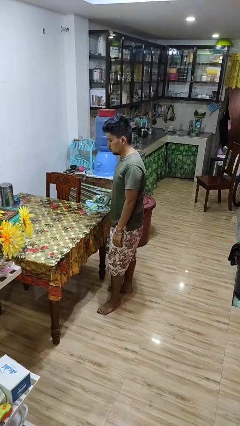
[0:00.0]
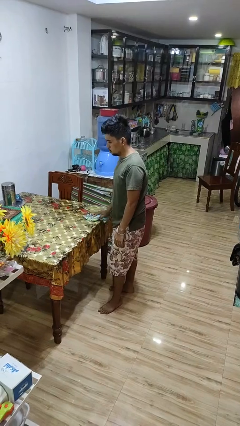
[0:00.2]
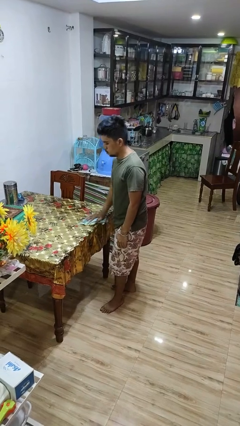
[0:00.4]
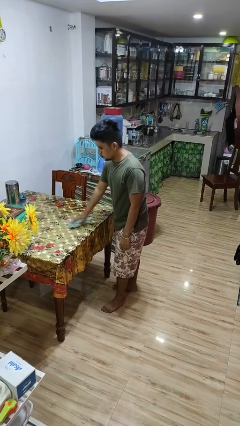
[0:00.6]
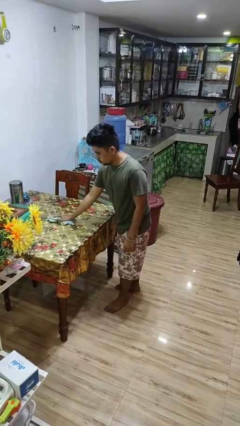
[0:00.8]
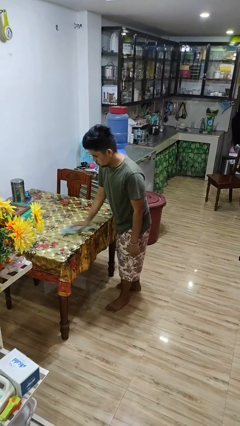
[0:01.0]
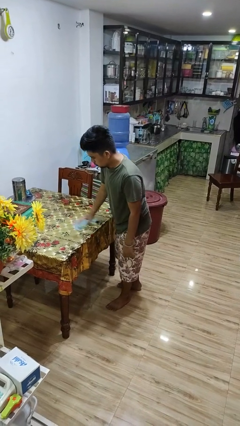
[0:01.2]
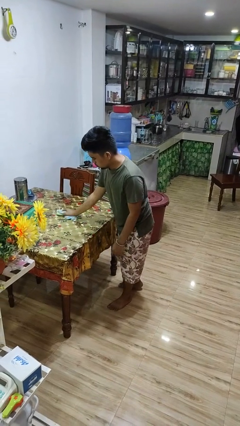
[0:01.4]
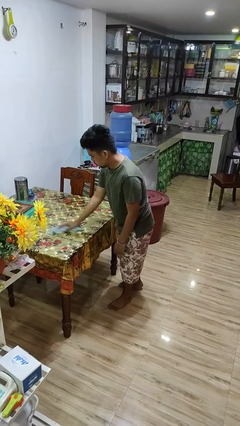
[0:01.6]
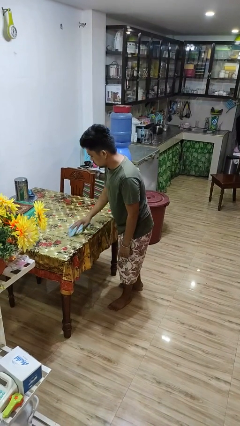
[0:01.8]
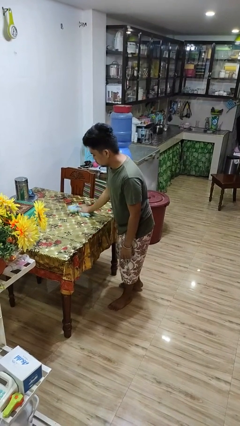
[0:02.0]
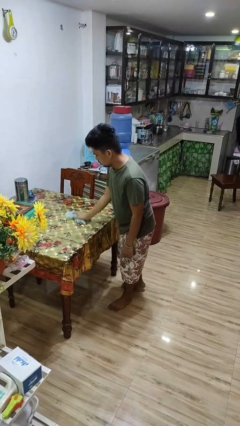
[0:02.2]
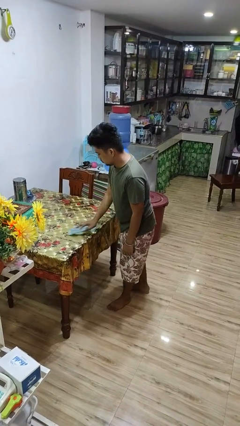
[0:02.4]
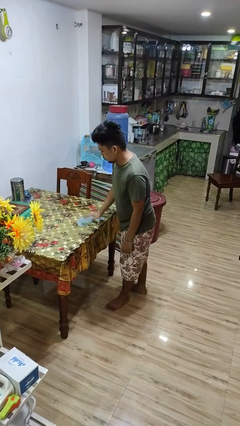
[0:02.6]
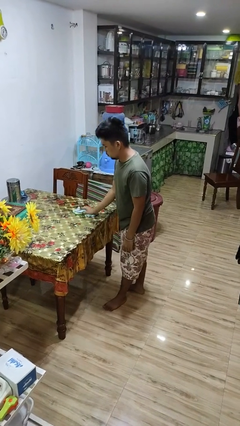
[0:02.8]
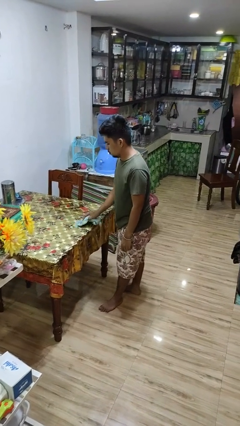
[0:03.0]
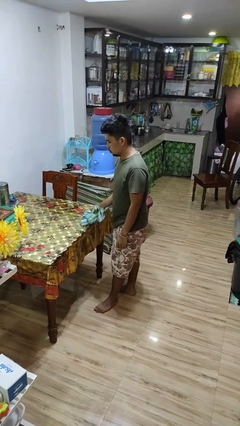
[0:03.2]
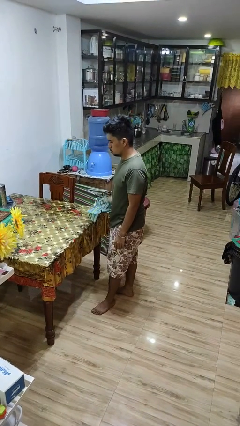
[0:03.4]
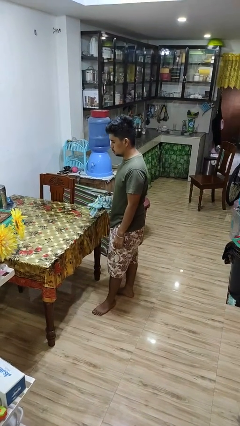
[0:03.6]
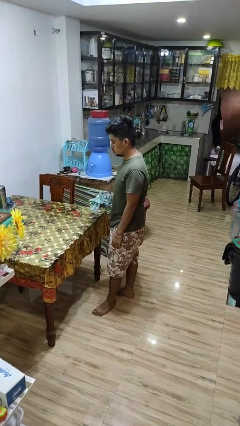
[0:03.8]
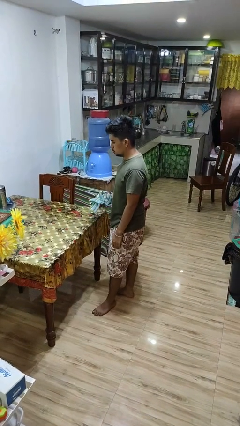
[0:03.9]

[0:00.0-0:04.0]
person cleans table with rag

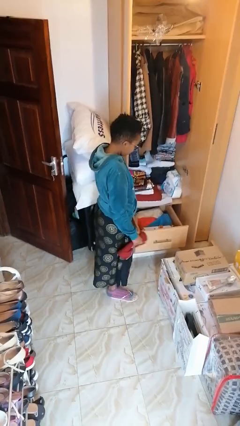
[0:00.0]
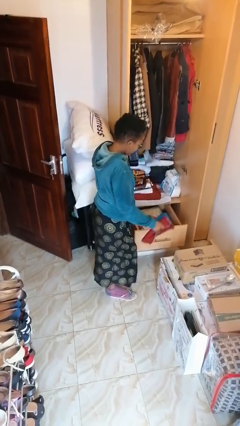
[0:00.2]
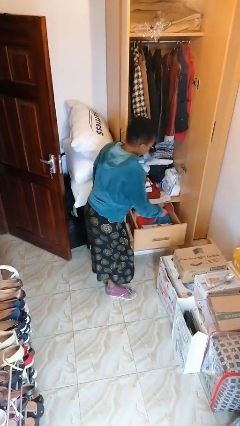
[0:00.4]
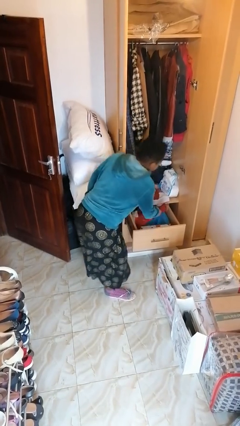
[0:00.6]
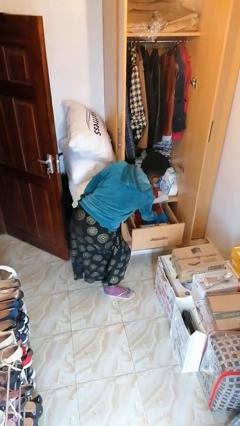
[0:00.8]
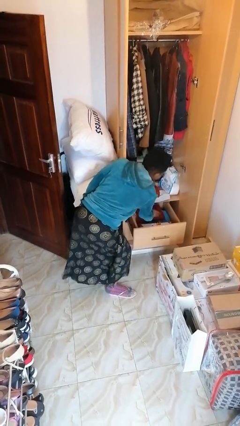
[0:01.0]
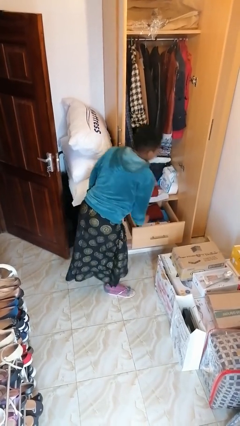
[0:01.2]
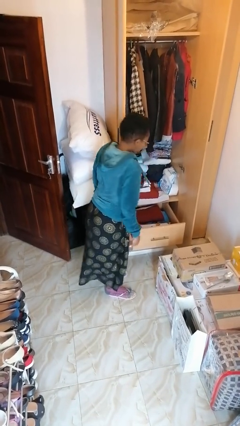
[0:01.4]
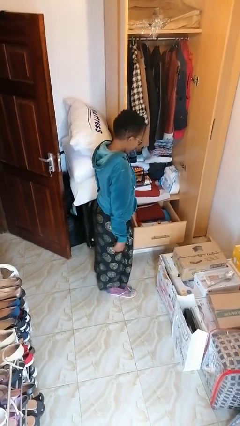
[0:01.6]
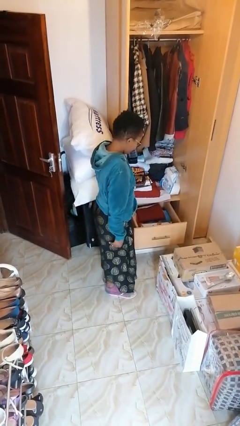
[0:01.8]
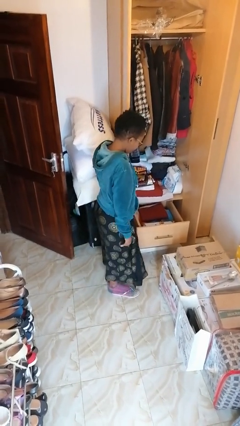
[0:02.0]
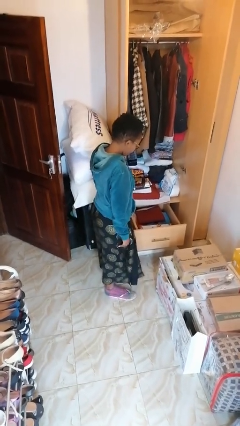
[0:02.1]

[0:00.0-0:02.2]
person puts clothes into dresser

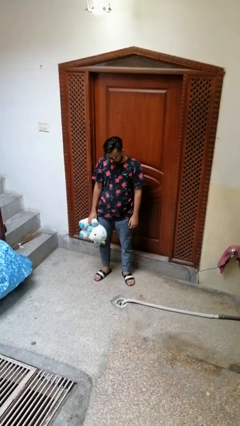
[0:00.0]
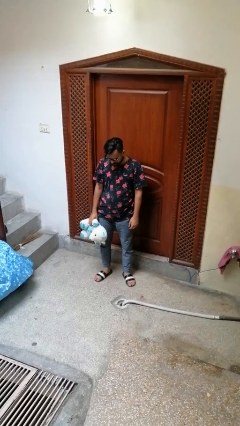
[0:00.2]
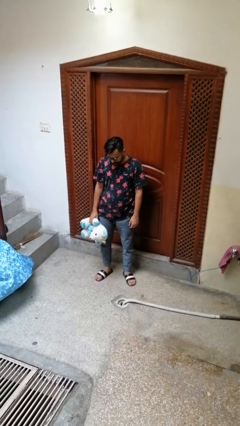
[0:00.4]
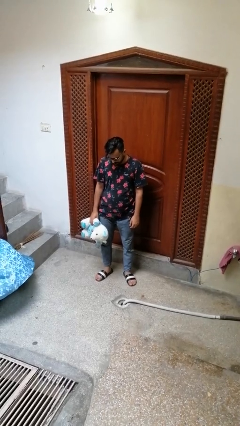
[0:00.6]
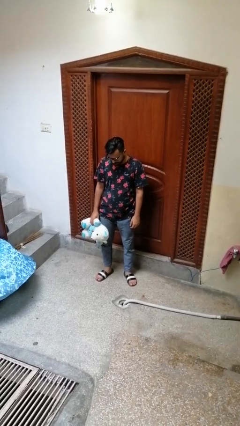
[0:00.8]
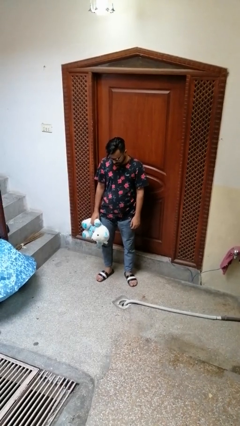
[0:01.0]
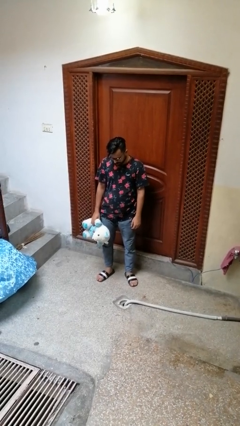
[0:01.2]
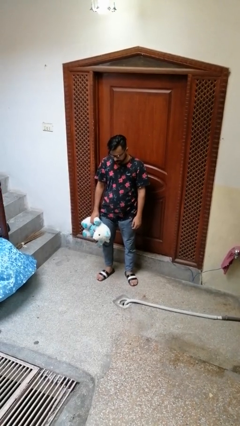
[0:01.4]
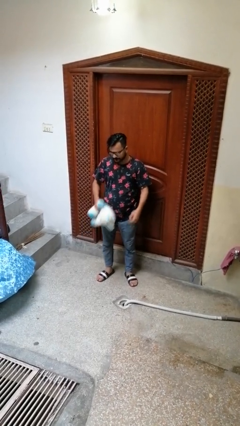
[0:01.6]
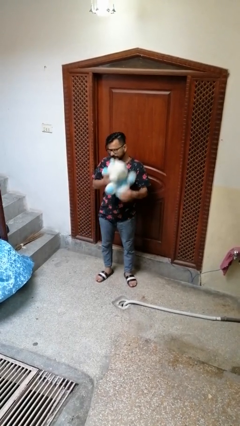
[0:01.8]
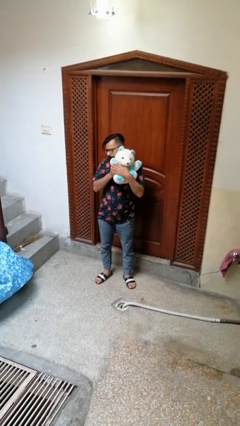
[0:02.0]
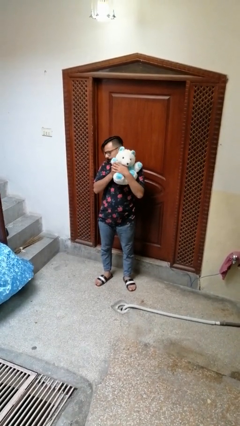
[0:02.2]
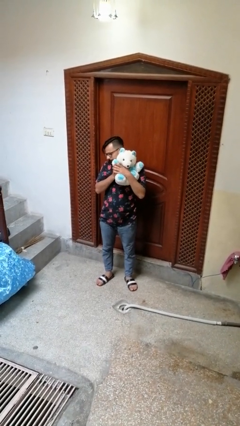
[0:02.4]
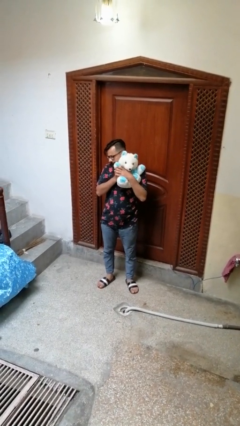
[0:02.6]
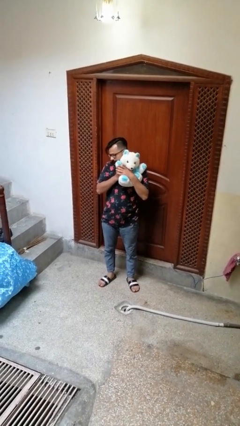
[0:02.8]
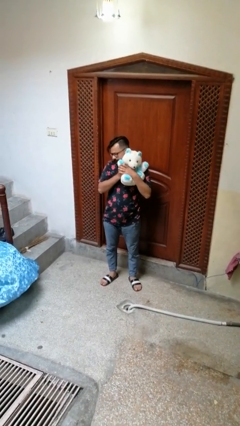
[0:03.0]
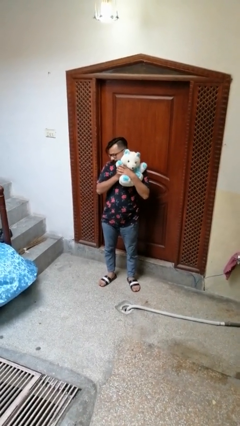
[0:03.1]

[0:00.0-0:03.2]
person hugs stuffed animal

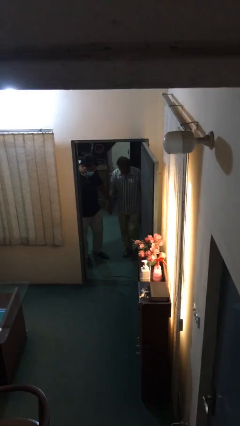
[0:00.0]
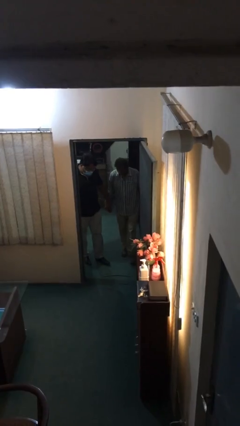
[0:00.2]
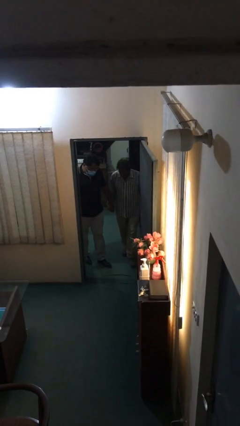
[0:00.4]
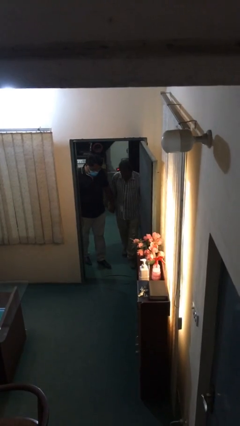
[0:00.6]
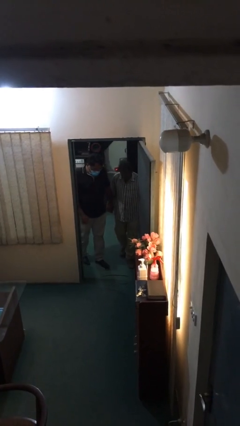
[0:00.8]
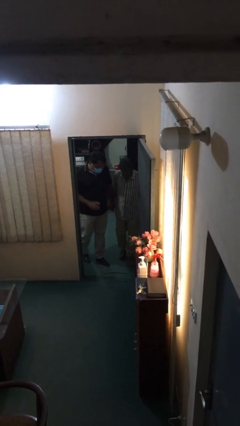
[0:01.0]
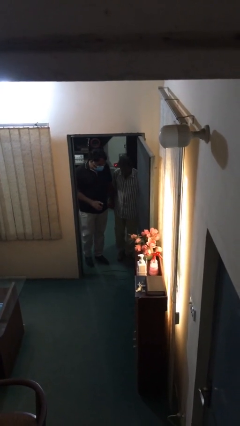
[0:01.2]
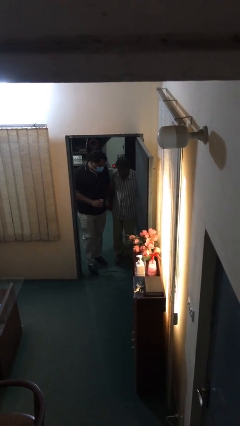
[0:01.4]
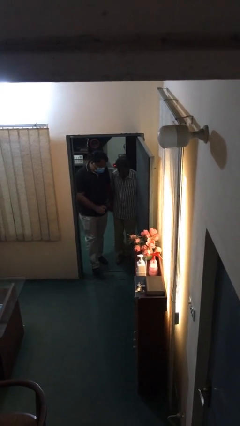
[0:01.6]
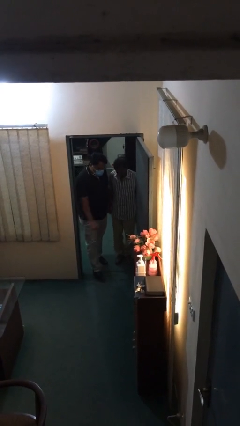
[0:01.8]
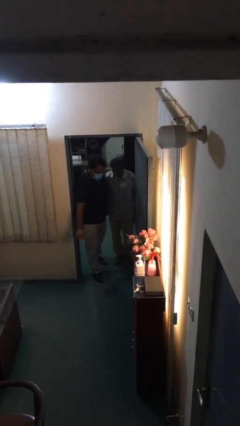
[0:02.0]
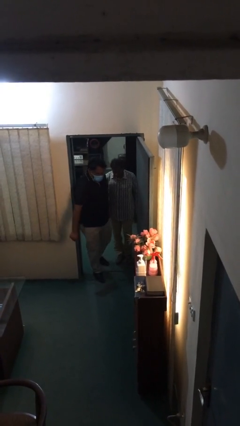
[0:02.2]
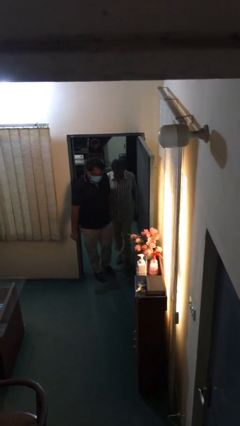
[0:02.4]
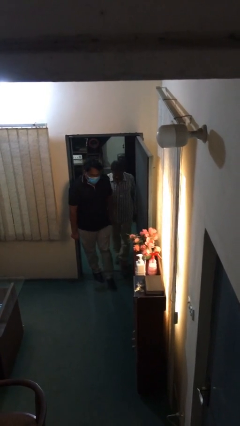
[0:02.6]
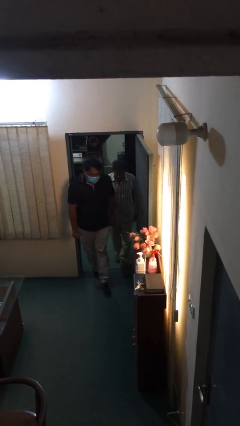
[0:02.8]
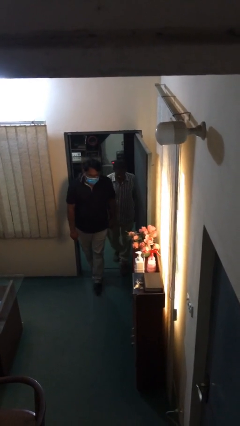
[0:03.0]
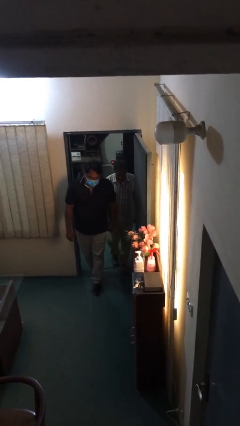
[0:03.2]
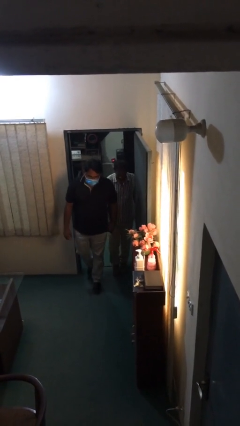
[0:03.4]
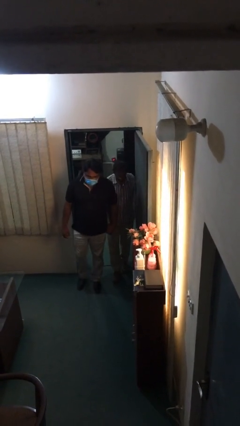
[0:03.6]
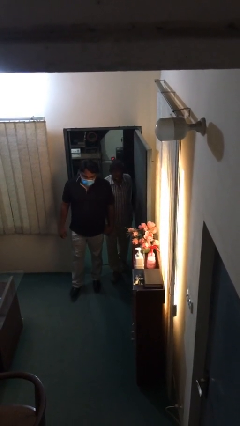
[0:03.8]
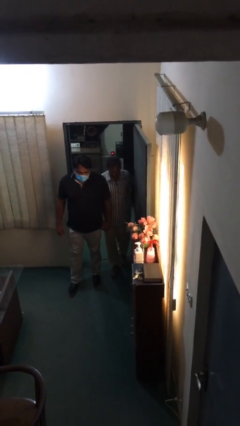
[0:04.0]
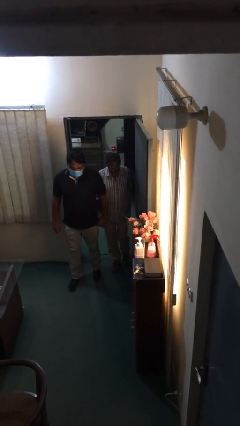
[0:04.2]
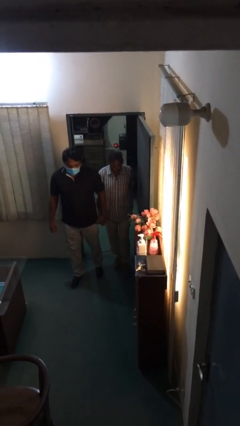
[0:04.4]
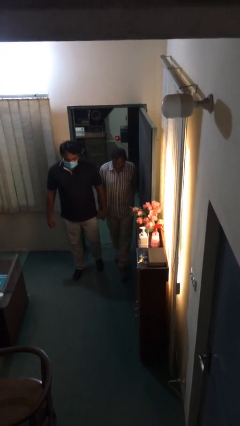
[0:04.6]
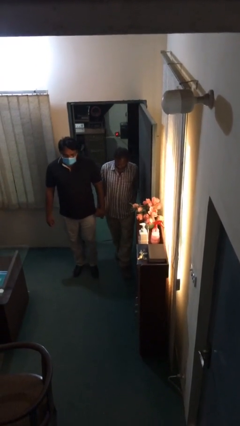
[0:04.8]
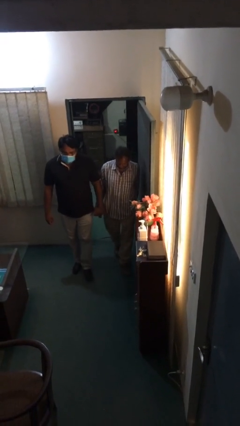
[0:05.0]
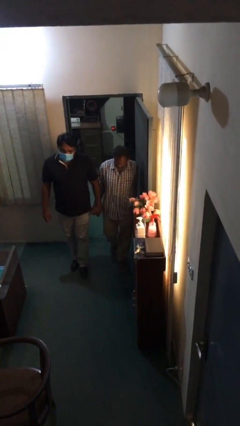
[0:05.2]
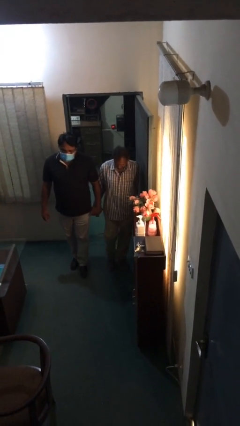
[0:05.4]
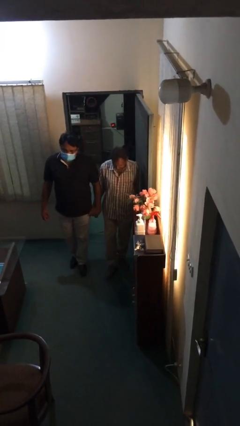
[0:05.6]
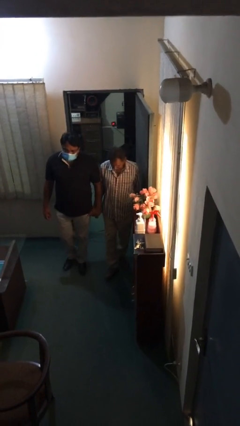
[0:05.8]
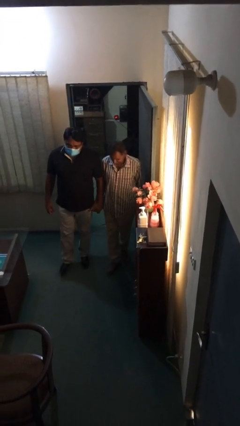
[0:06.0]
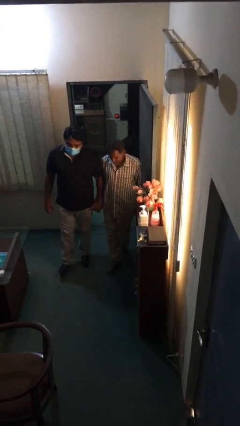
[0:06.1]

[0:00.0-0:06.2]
person holds hand

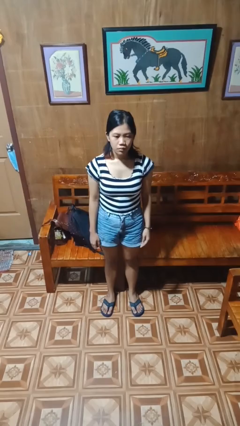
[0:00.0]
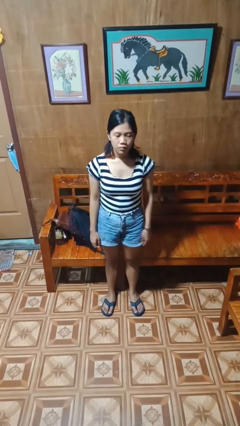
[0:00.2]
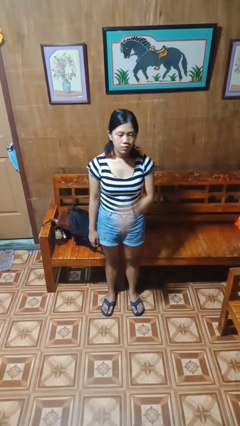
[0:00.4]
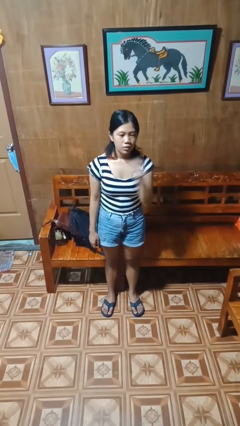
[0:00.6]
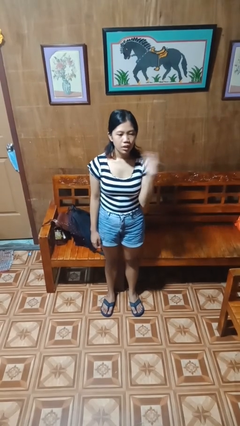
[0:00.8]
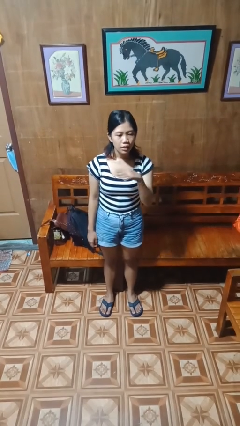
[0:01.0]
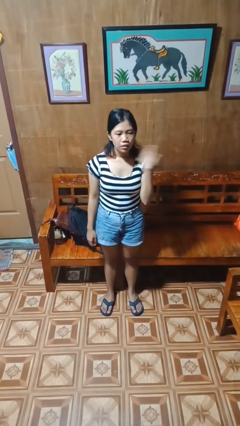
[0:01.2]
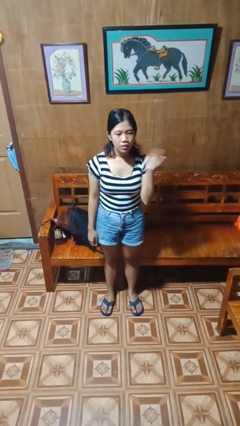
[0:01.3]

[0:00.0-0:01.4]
person gestures cut

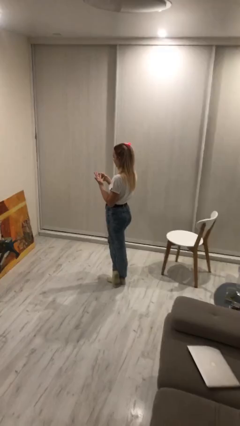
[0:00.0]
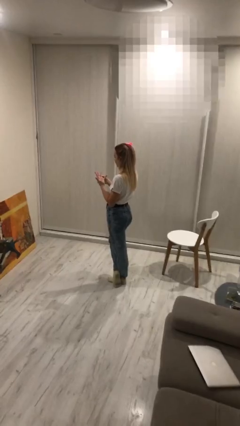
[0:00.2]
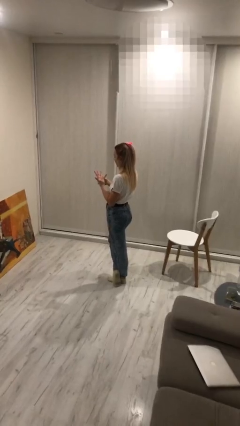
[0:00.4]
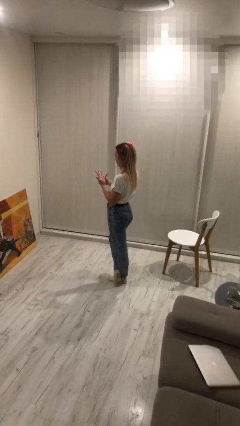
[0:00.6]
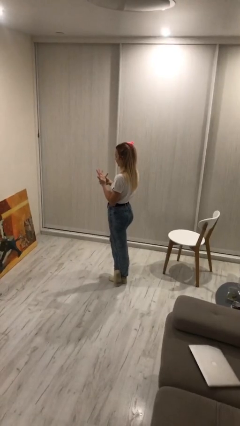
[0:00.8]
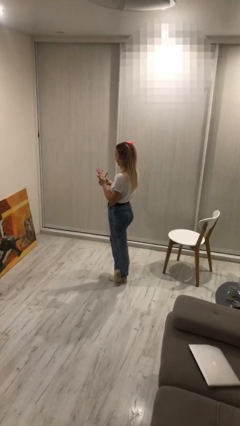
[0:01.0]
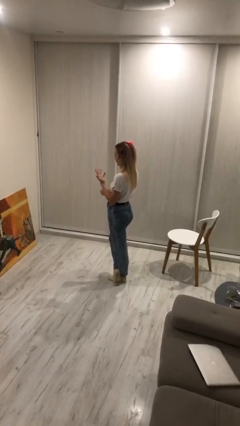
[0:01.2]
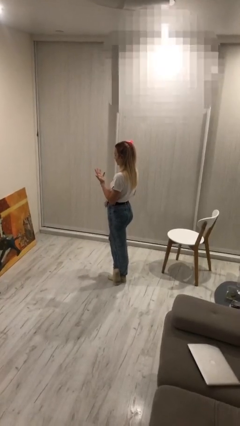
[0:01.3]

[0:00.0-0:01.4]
person puts on ring
